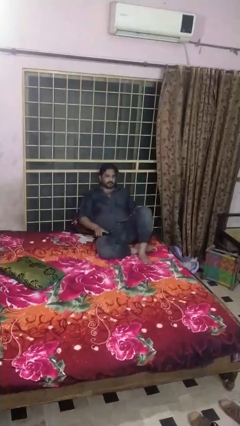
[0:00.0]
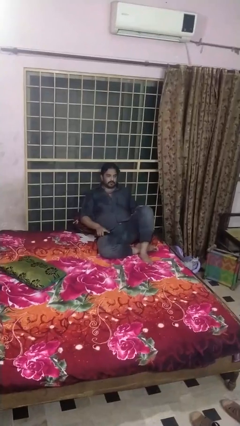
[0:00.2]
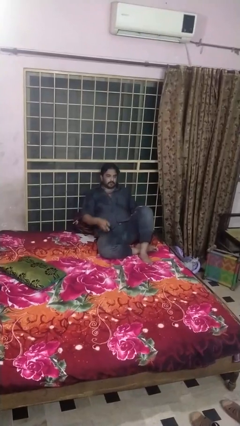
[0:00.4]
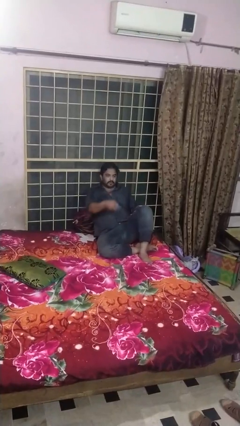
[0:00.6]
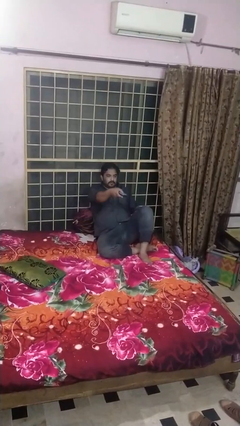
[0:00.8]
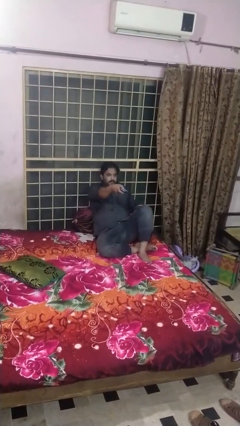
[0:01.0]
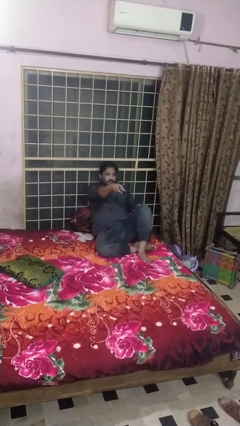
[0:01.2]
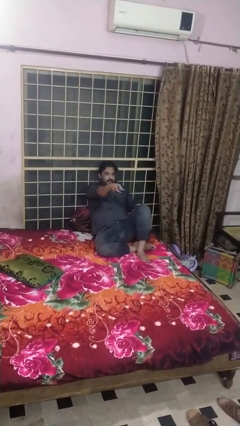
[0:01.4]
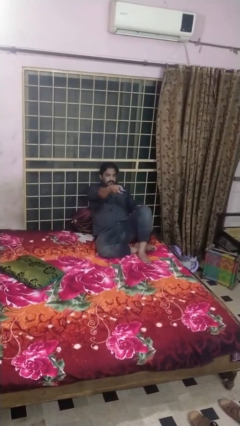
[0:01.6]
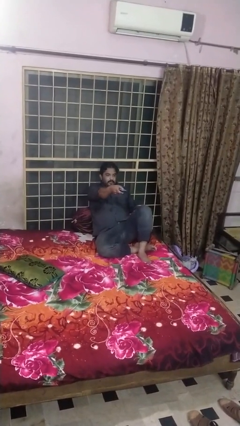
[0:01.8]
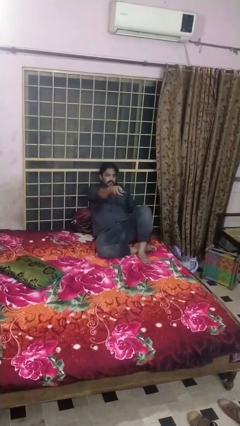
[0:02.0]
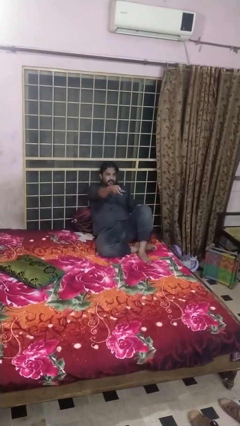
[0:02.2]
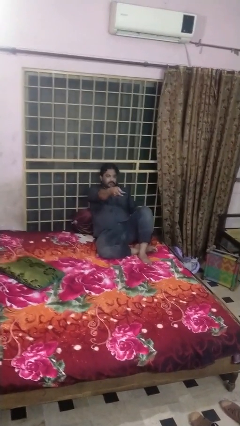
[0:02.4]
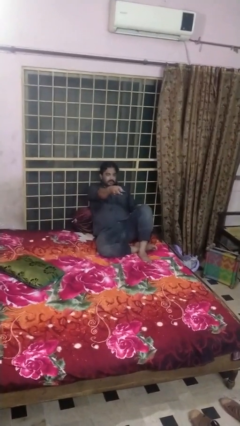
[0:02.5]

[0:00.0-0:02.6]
person uses television remote

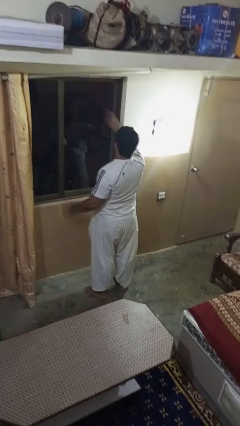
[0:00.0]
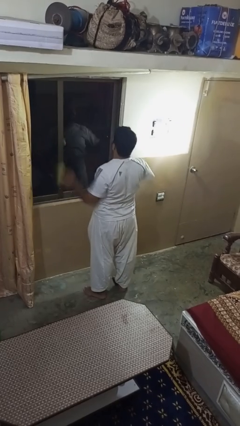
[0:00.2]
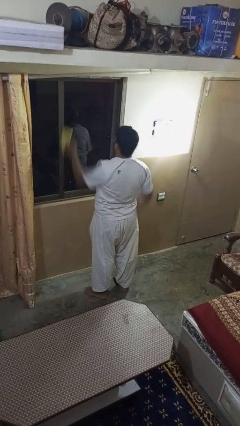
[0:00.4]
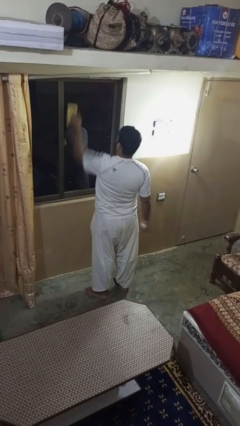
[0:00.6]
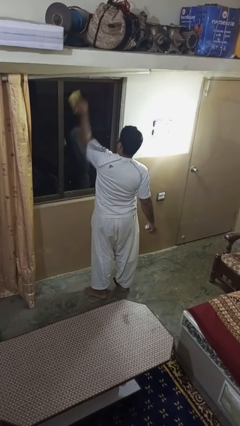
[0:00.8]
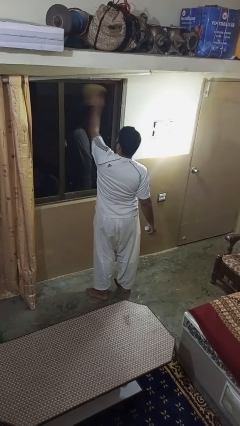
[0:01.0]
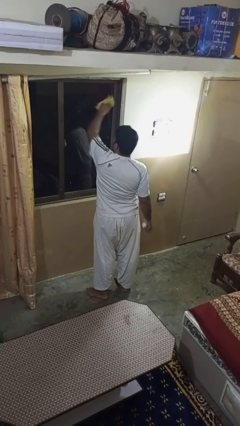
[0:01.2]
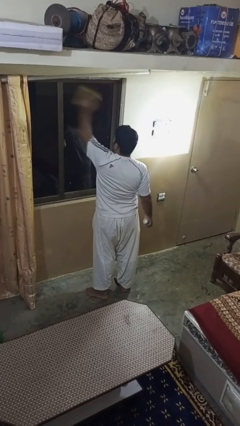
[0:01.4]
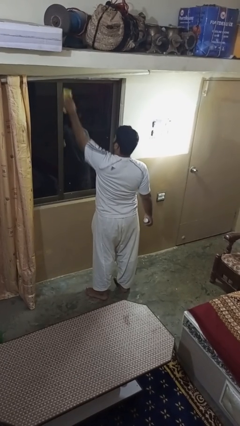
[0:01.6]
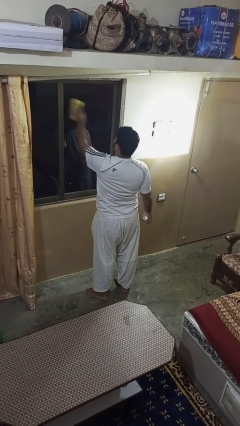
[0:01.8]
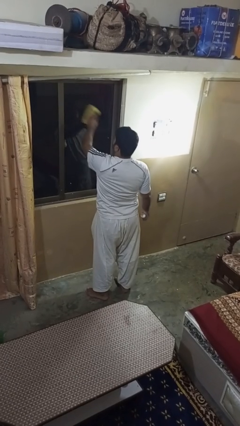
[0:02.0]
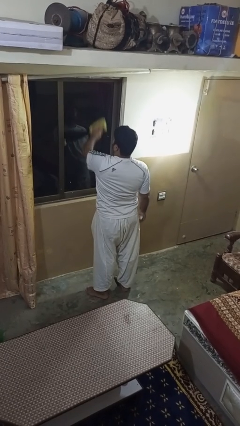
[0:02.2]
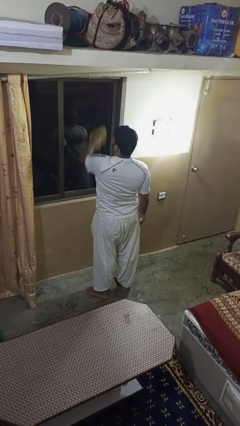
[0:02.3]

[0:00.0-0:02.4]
person washes window

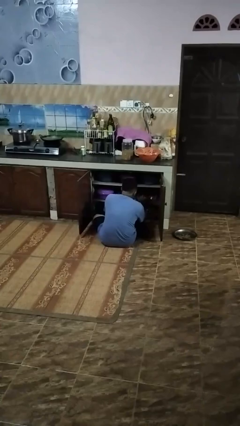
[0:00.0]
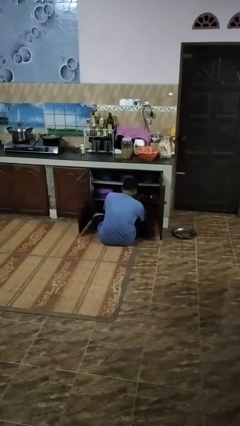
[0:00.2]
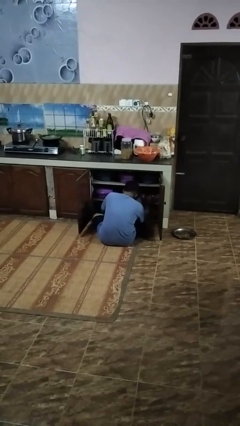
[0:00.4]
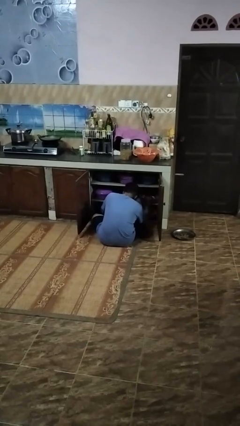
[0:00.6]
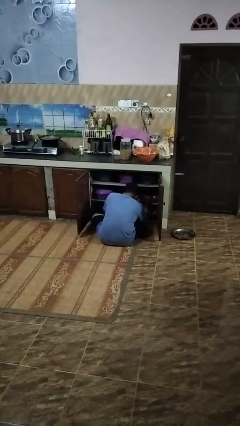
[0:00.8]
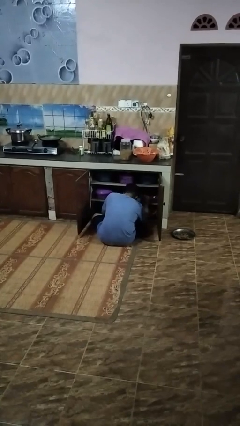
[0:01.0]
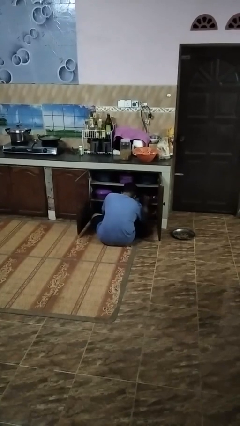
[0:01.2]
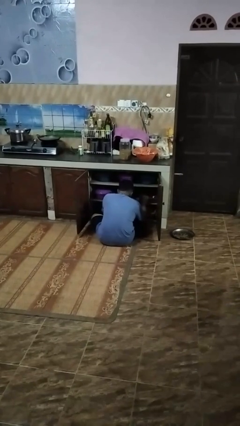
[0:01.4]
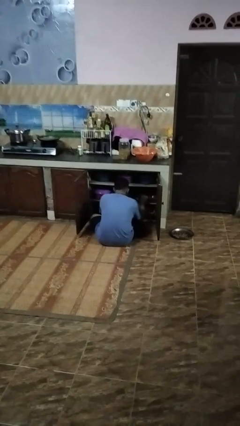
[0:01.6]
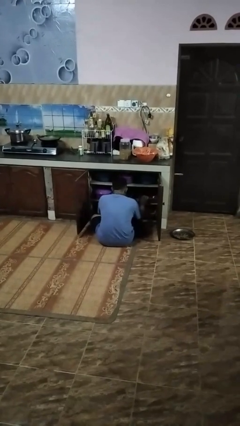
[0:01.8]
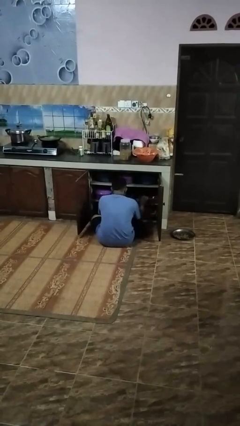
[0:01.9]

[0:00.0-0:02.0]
person searches in kitchen drawer

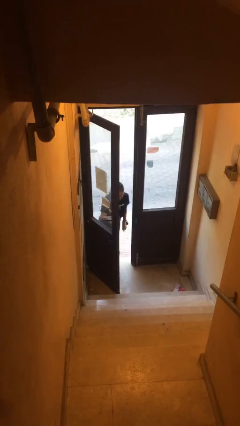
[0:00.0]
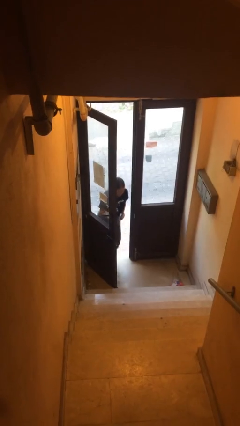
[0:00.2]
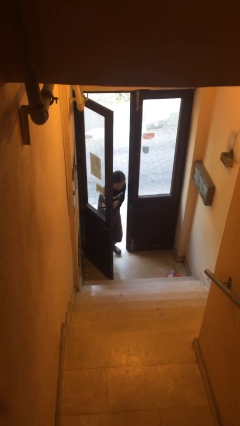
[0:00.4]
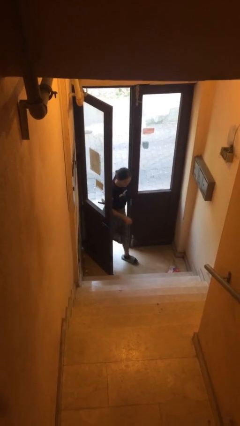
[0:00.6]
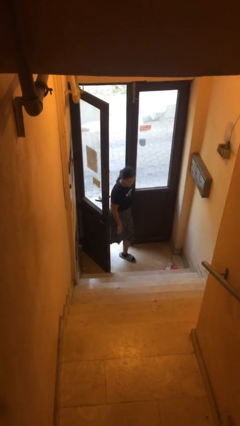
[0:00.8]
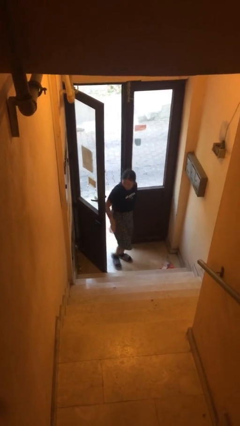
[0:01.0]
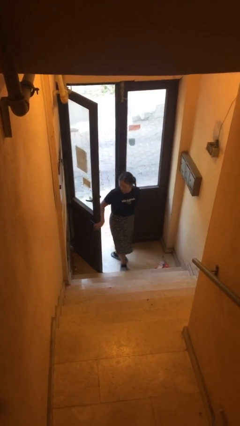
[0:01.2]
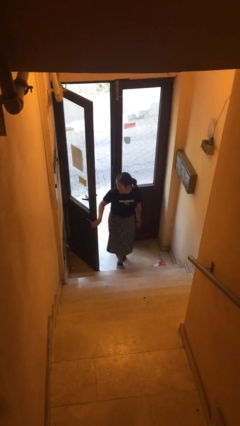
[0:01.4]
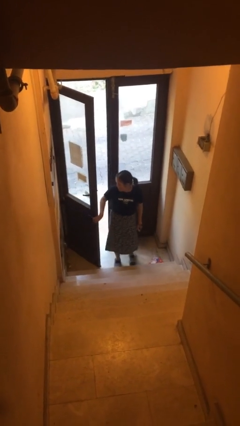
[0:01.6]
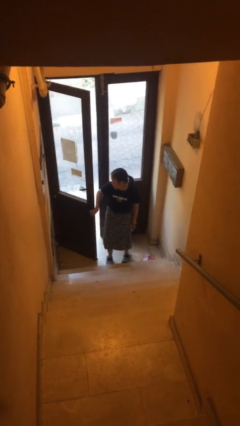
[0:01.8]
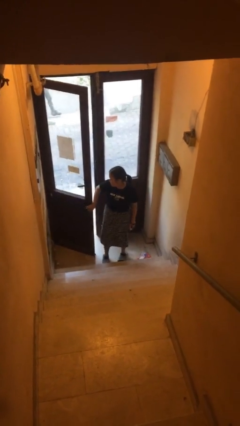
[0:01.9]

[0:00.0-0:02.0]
person enters scene through structure

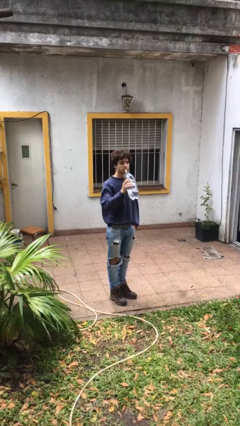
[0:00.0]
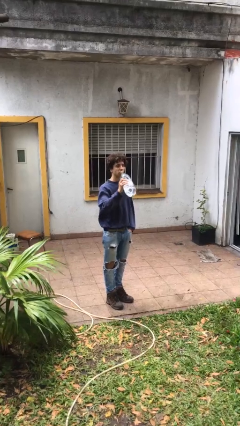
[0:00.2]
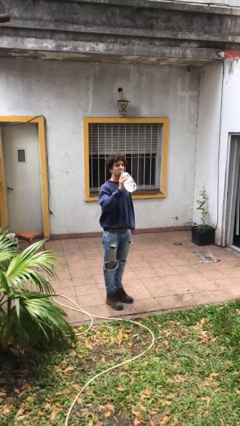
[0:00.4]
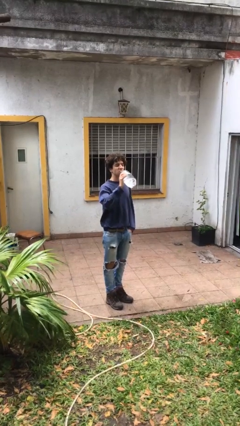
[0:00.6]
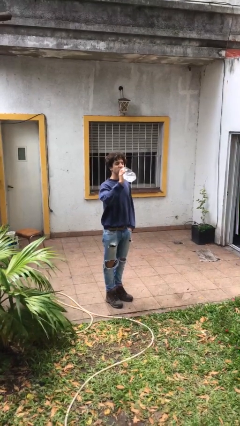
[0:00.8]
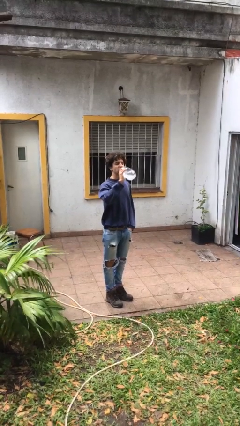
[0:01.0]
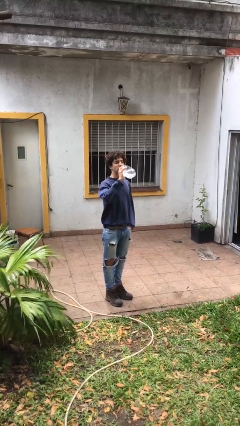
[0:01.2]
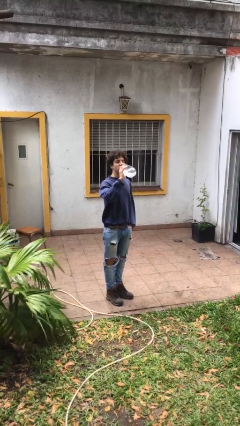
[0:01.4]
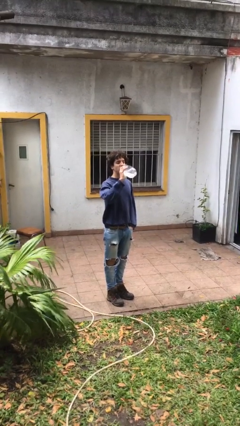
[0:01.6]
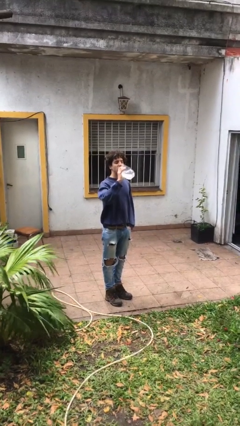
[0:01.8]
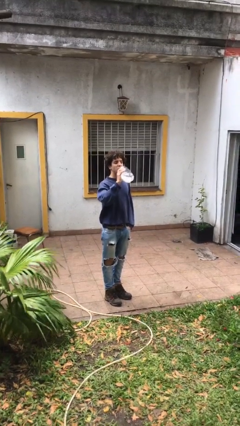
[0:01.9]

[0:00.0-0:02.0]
person drinks from bottle

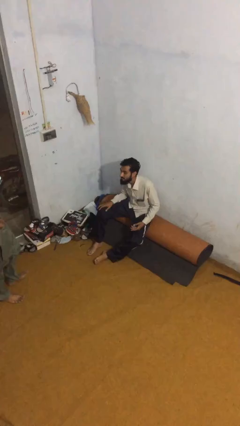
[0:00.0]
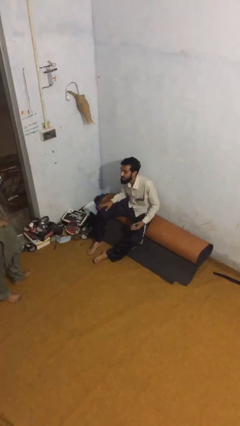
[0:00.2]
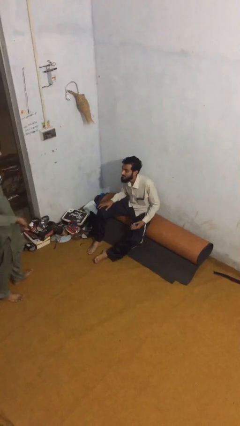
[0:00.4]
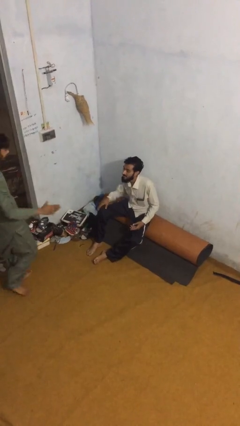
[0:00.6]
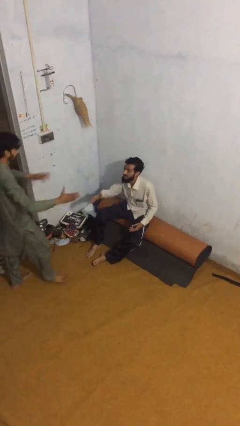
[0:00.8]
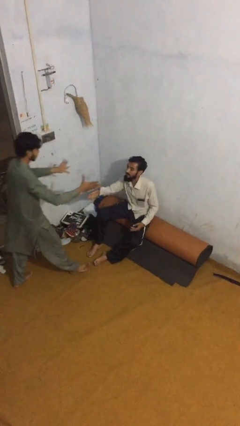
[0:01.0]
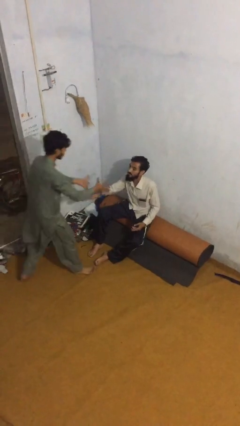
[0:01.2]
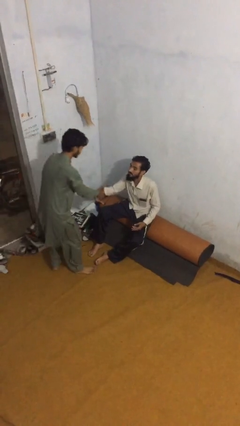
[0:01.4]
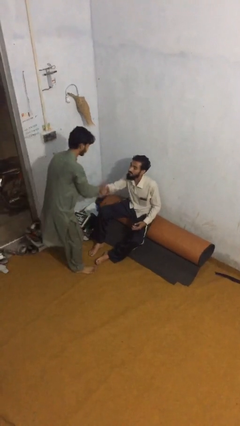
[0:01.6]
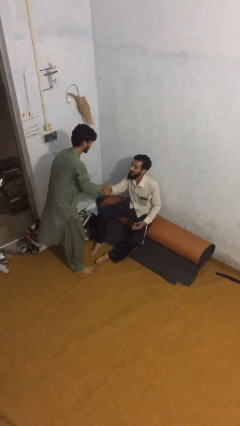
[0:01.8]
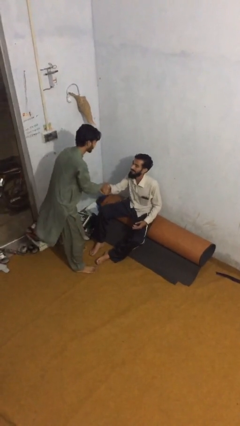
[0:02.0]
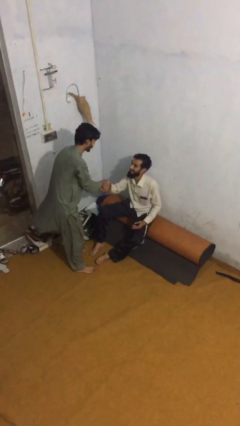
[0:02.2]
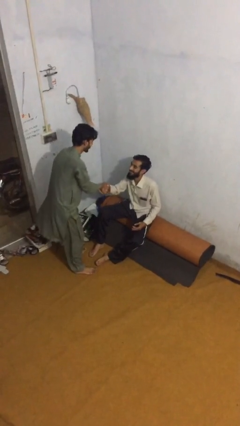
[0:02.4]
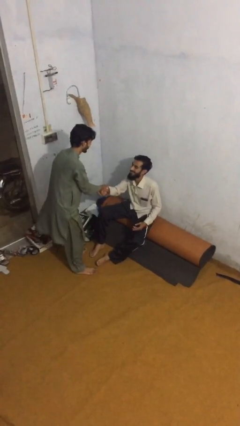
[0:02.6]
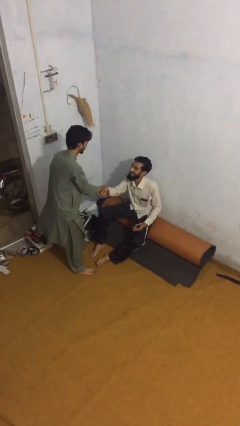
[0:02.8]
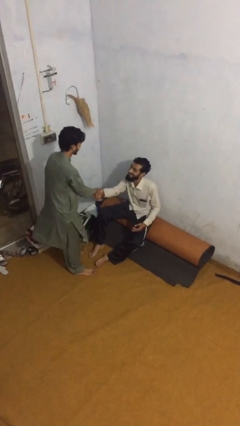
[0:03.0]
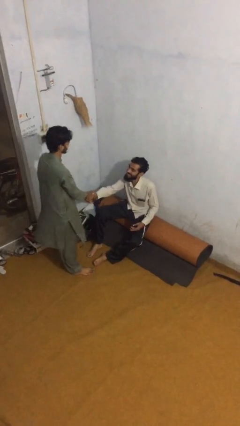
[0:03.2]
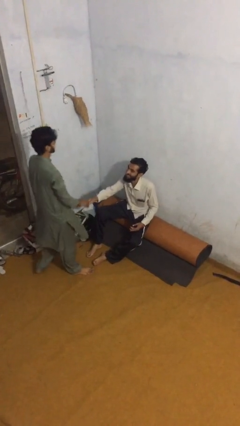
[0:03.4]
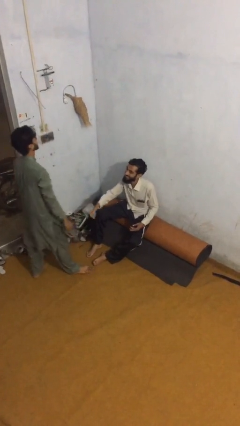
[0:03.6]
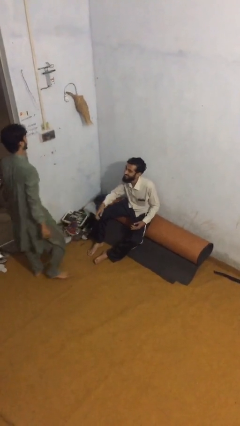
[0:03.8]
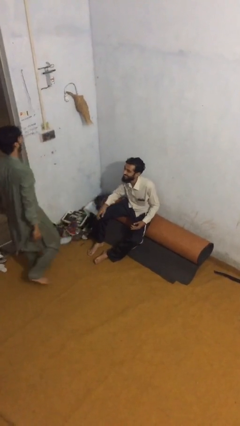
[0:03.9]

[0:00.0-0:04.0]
person shakes hand

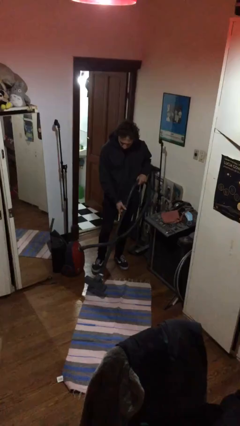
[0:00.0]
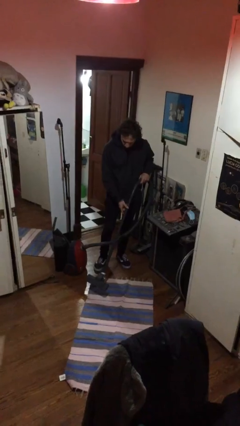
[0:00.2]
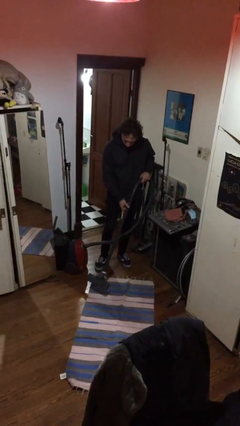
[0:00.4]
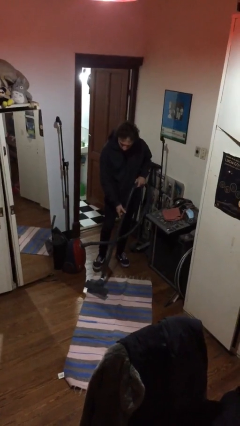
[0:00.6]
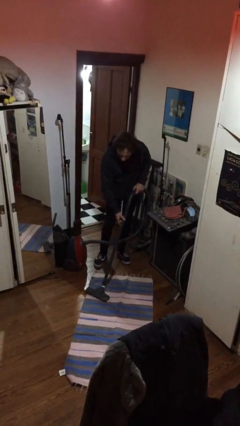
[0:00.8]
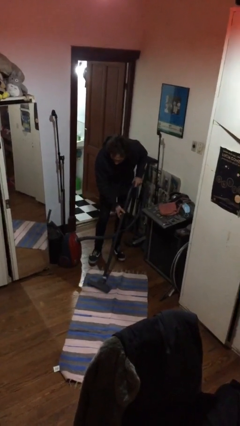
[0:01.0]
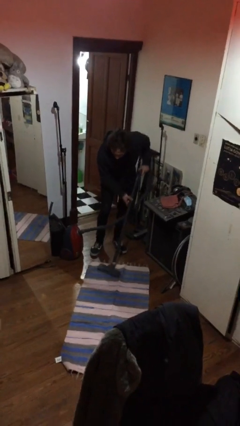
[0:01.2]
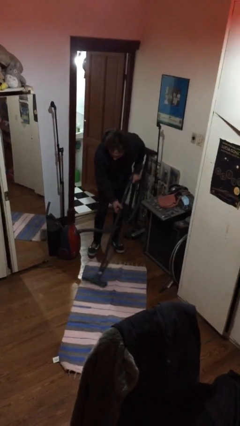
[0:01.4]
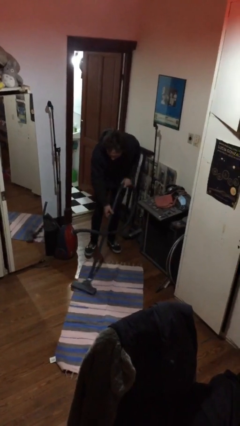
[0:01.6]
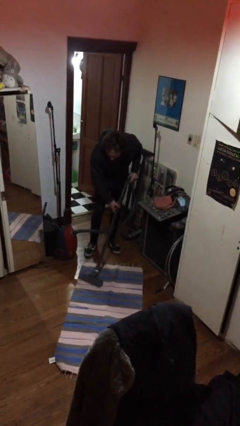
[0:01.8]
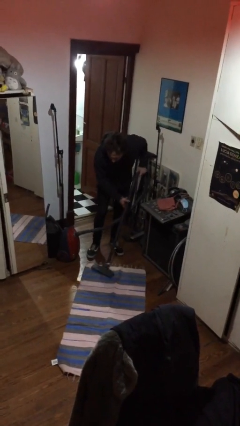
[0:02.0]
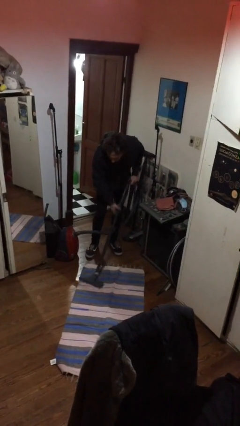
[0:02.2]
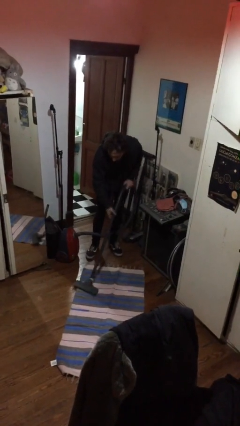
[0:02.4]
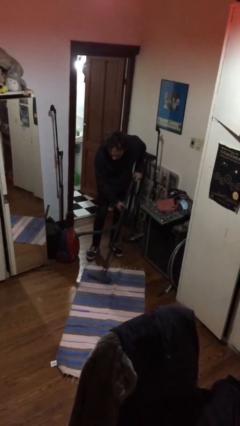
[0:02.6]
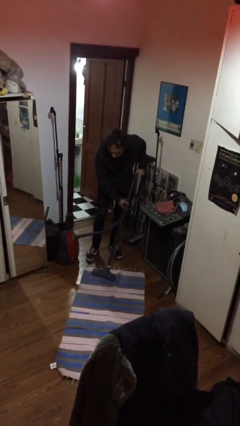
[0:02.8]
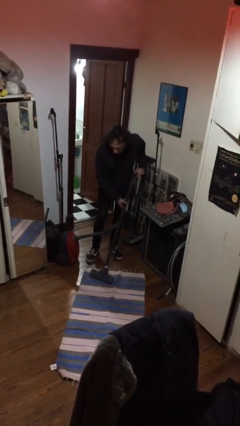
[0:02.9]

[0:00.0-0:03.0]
person vacuums carpet
